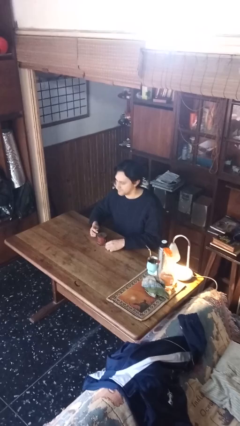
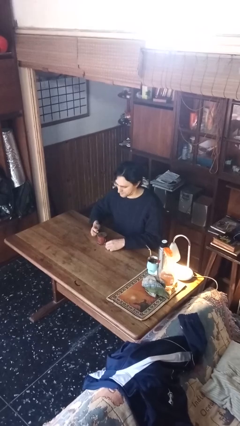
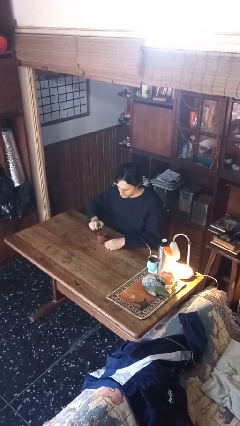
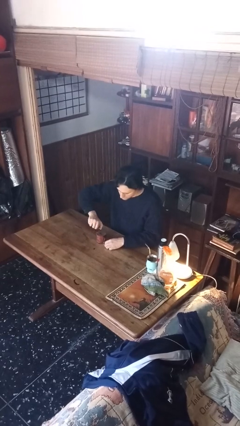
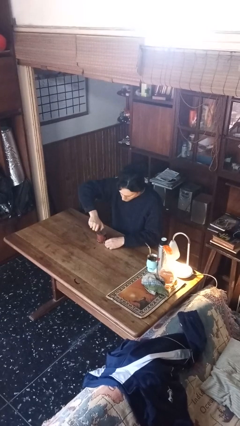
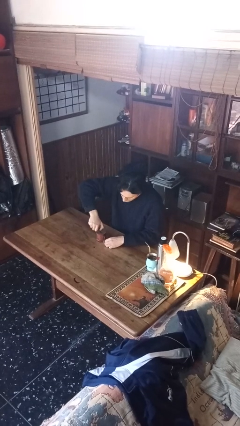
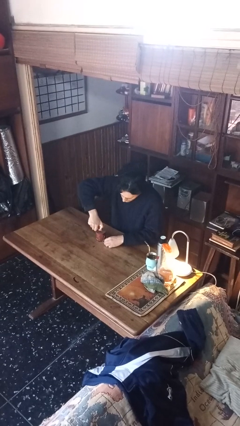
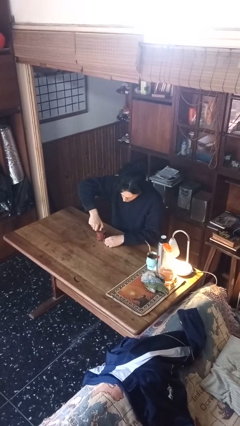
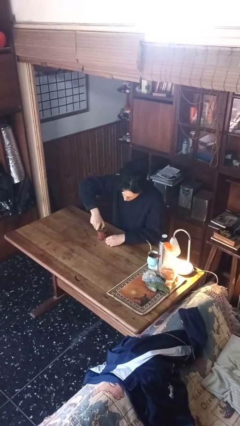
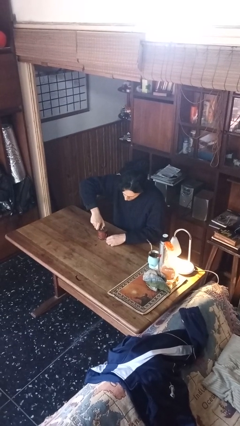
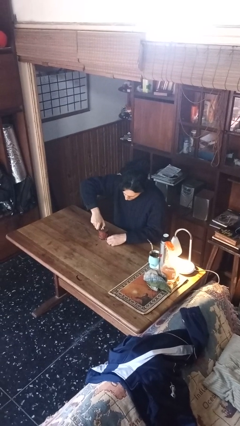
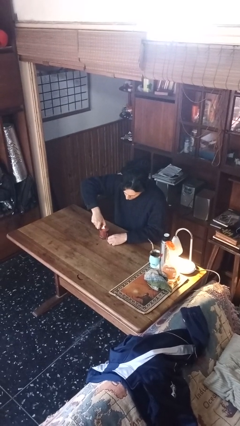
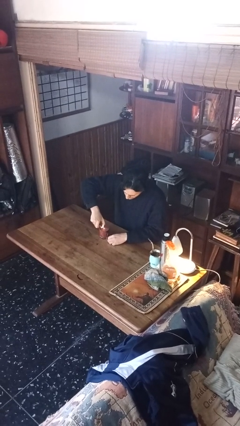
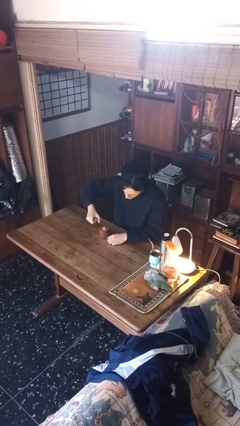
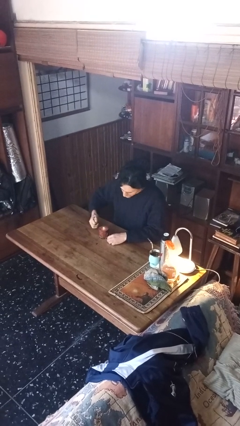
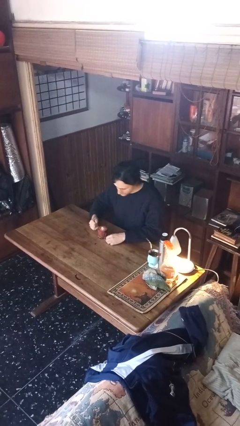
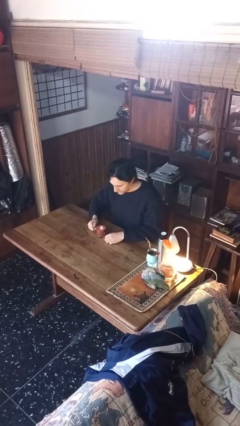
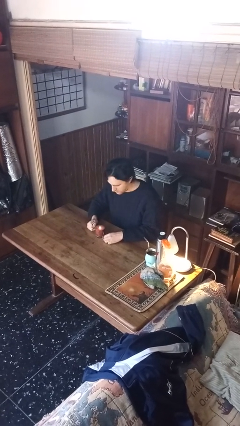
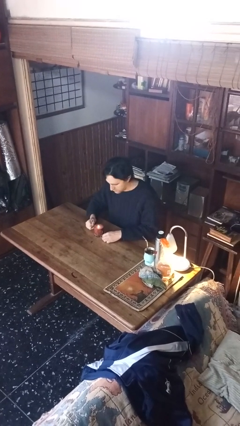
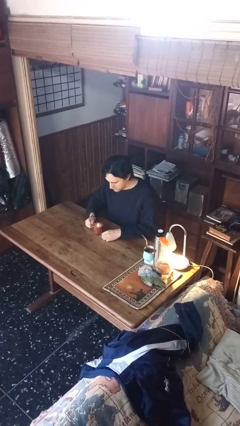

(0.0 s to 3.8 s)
person lights candle

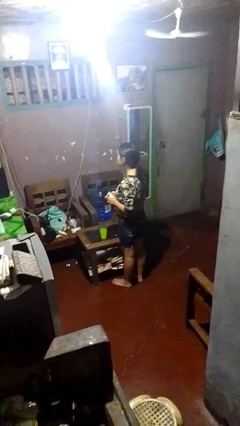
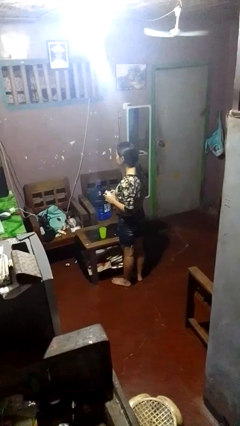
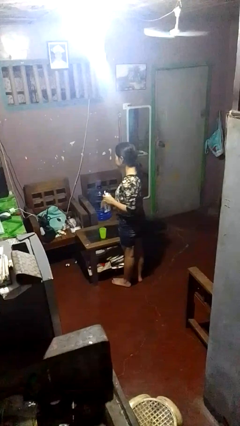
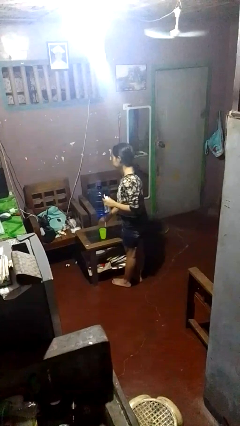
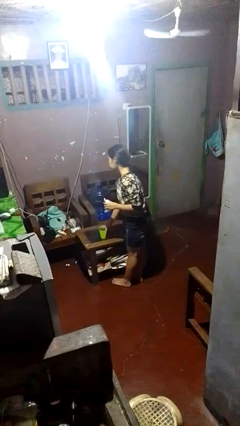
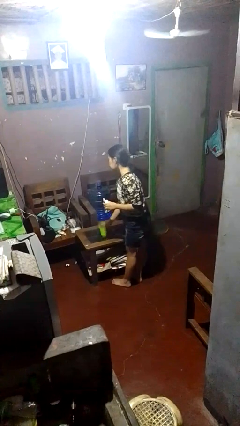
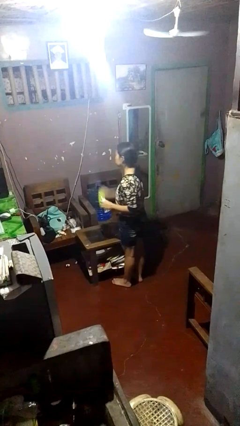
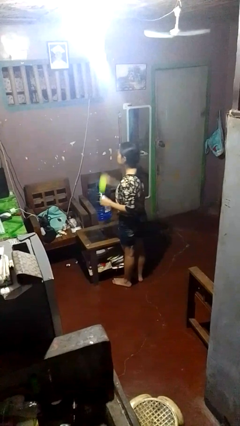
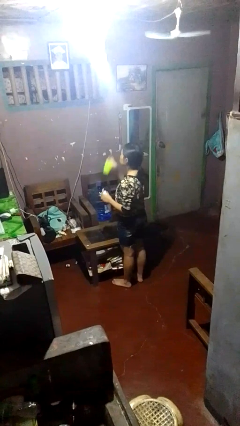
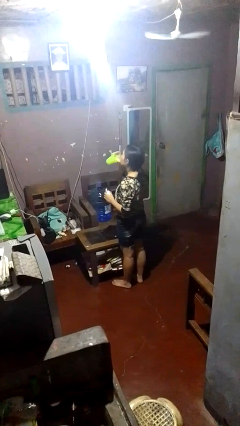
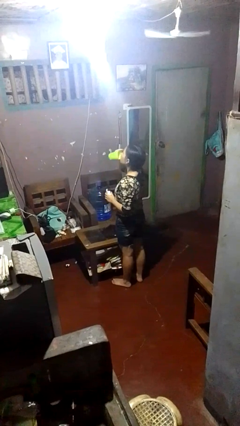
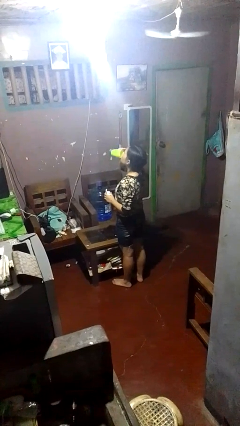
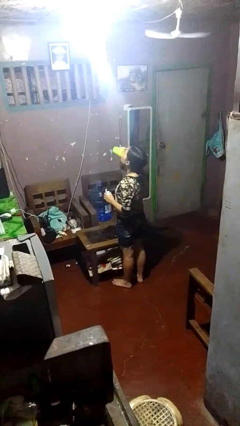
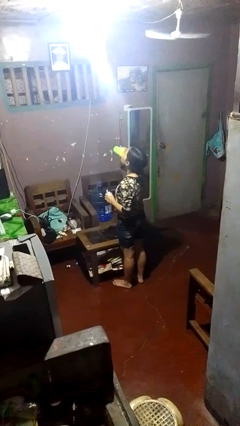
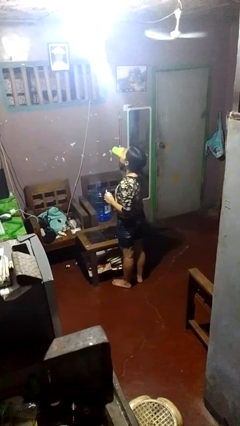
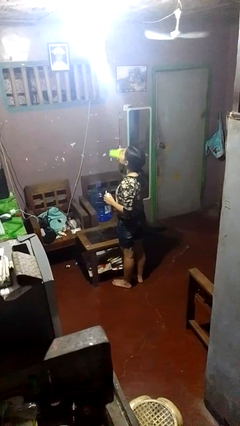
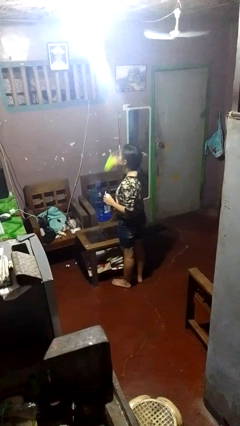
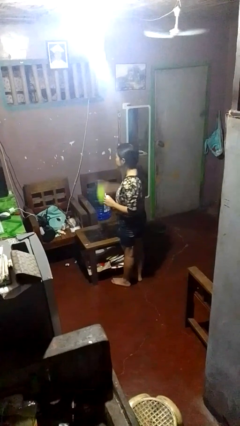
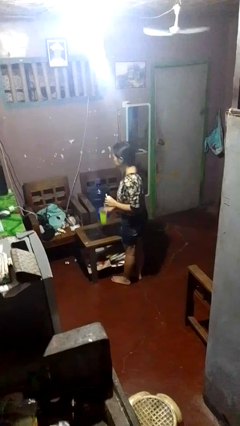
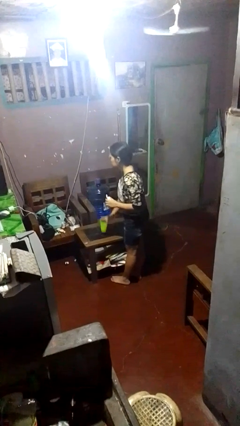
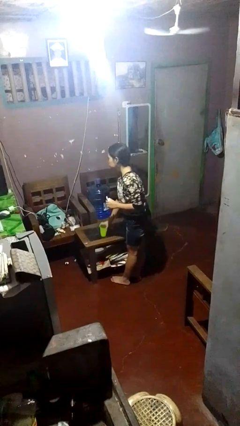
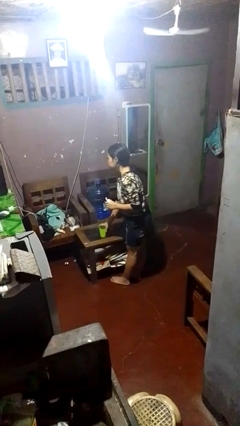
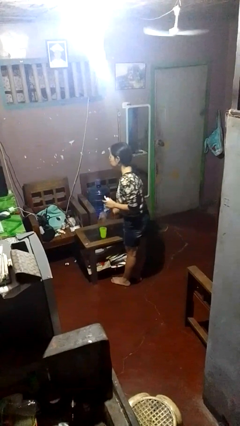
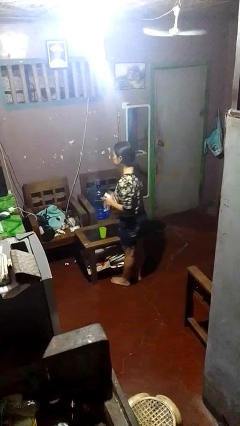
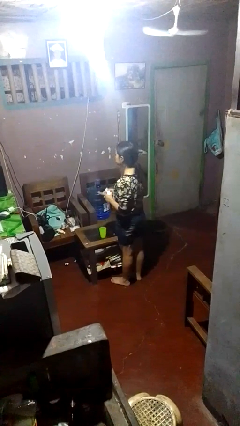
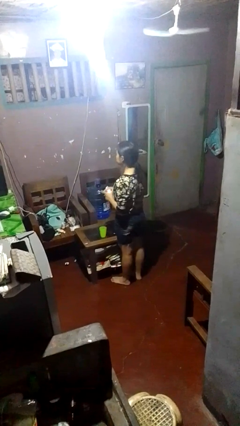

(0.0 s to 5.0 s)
person drinks from cup

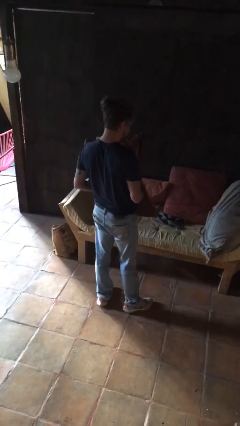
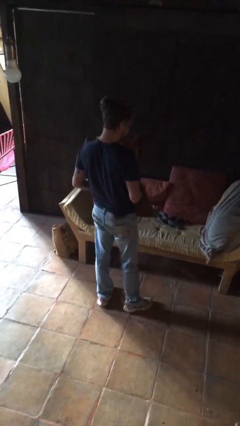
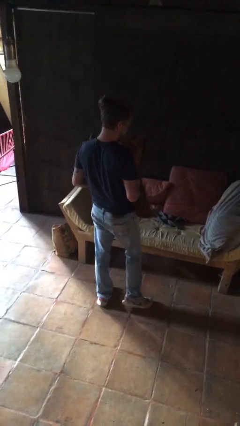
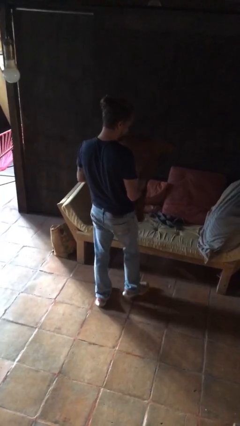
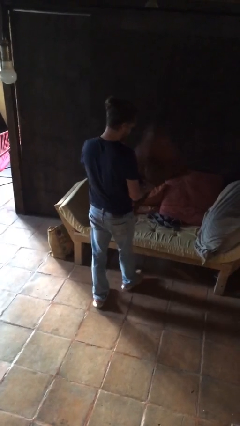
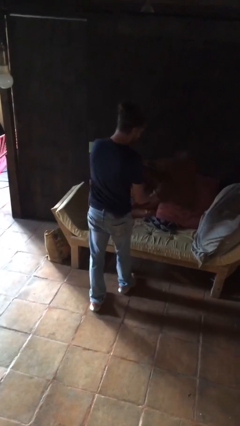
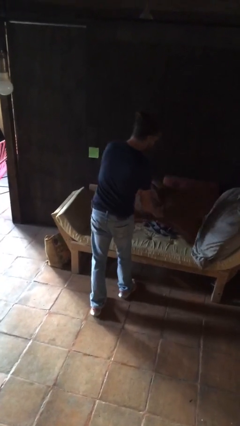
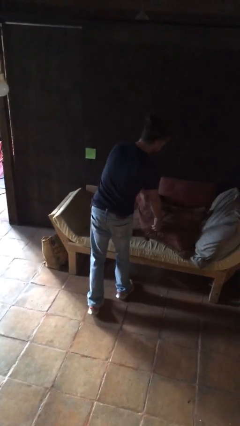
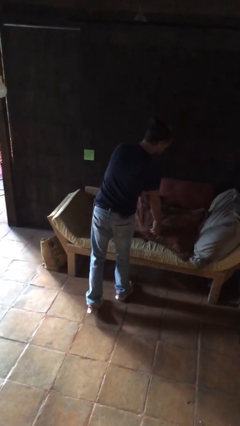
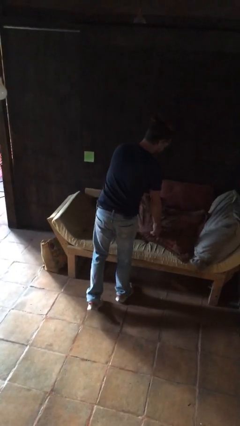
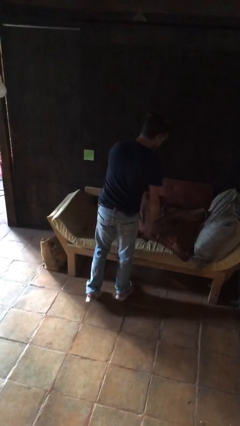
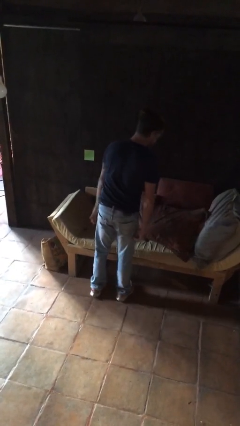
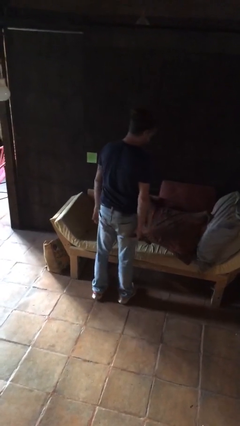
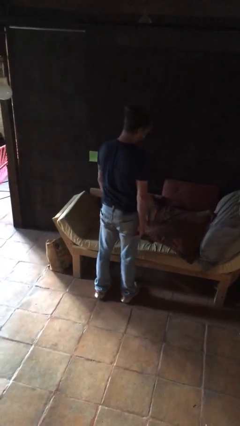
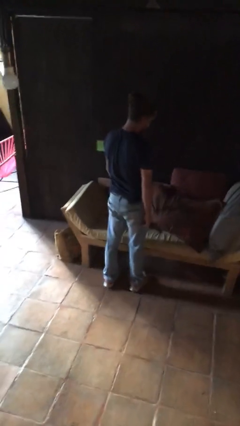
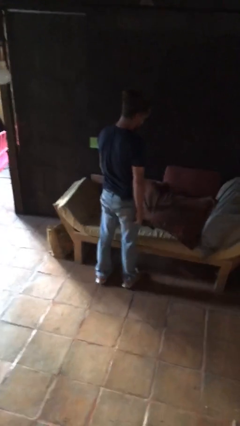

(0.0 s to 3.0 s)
person puts down object on couch

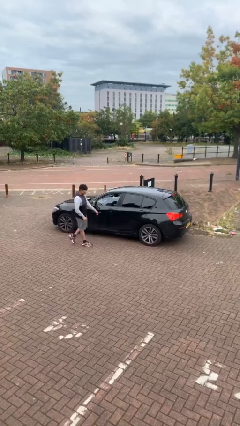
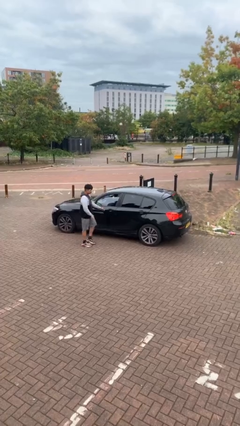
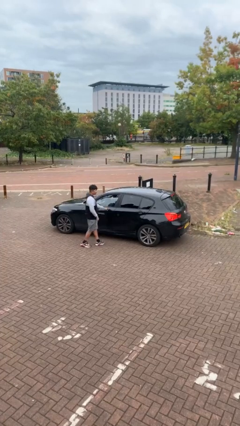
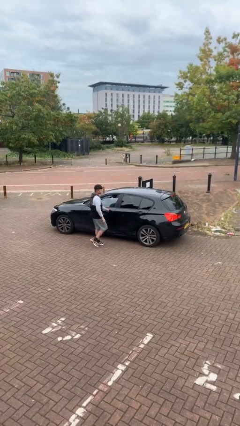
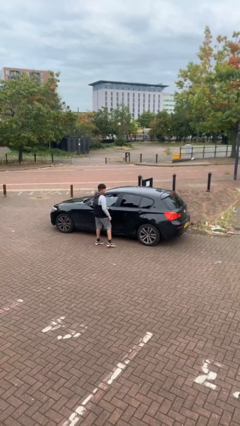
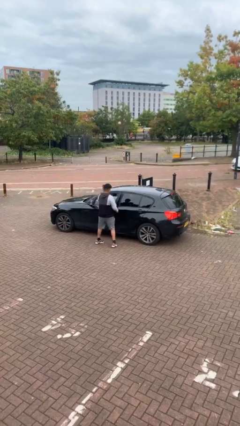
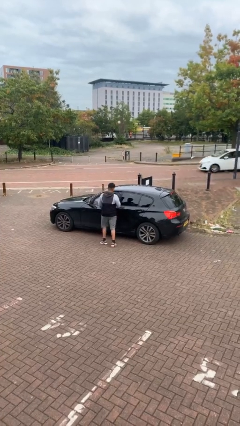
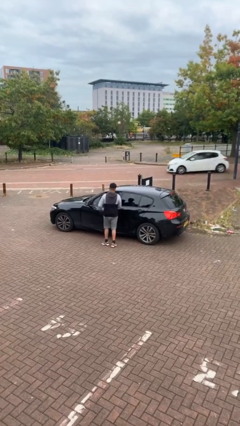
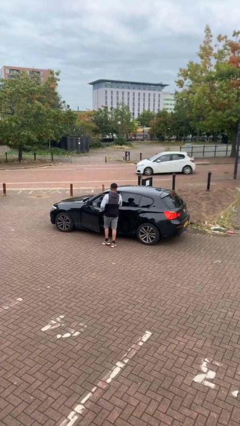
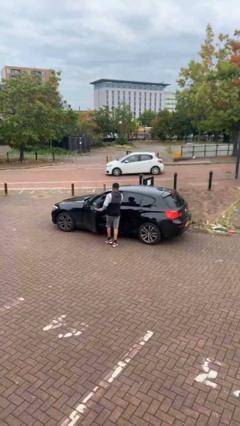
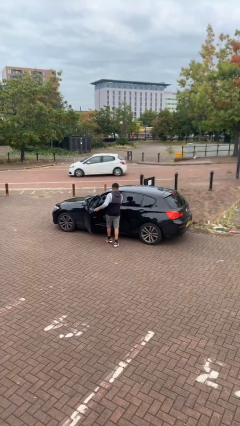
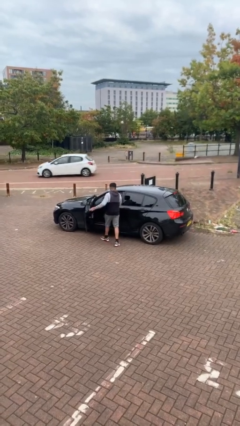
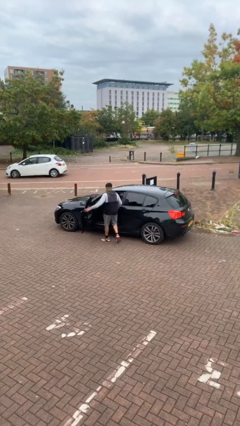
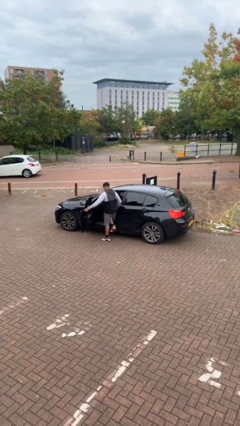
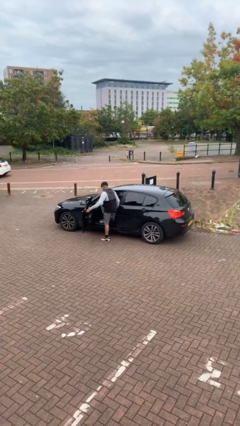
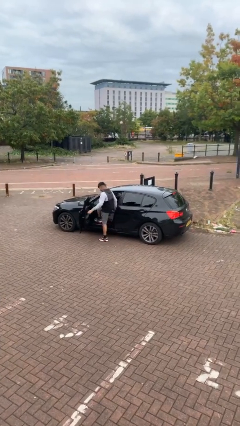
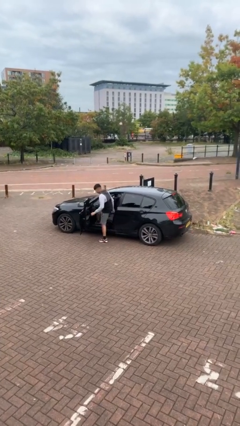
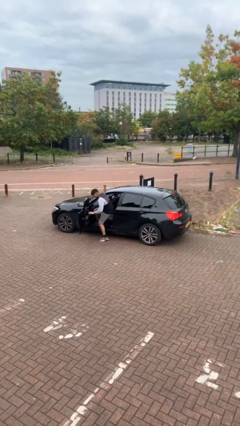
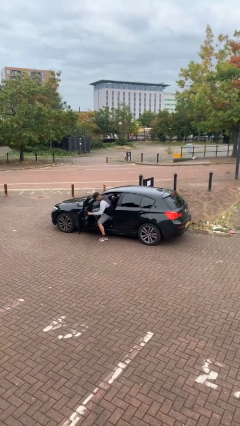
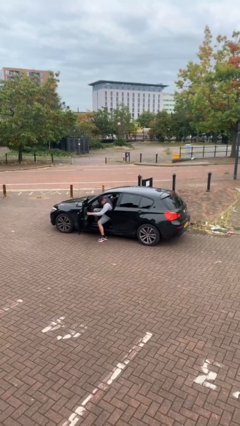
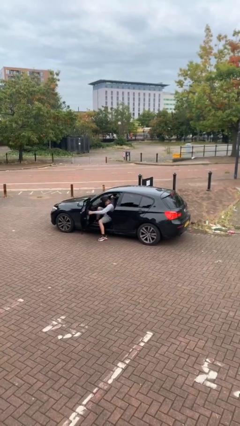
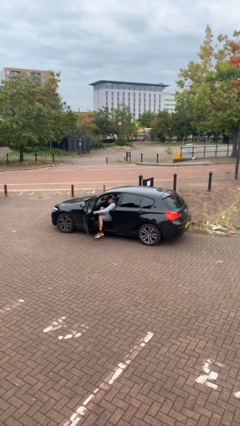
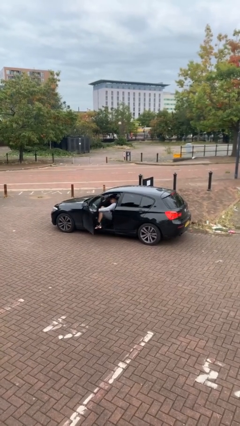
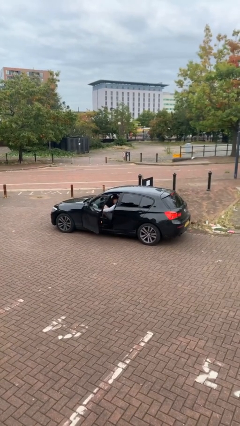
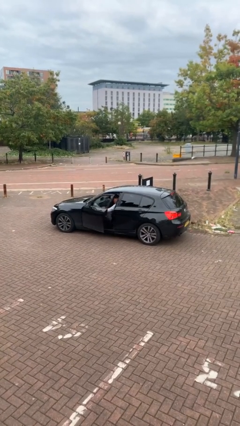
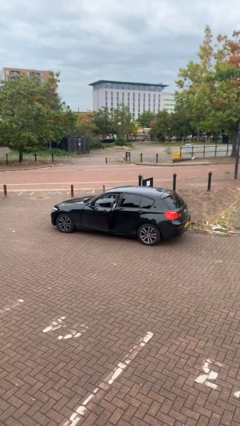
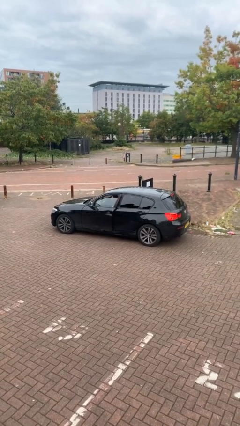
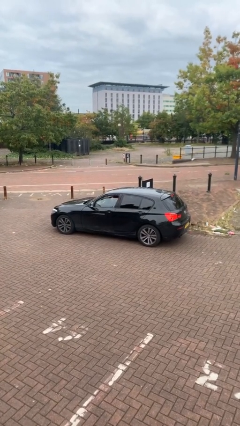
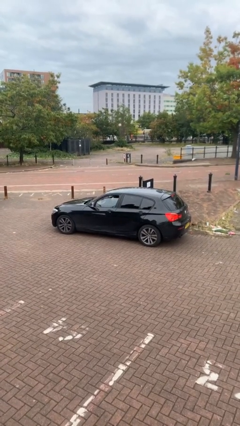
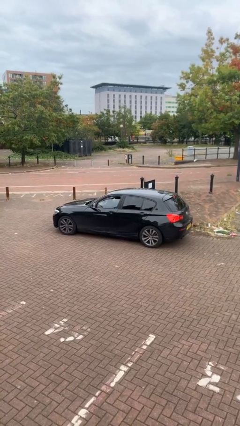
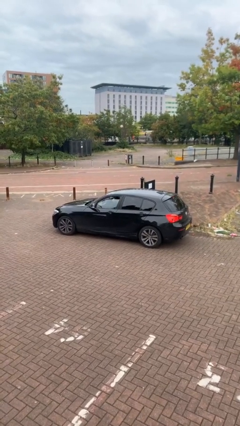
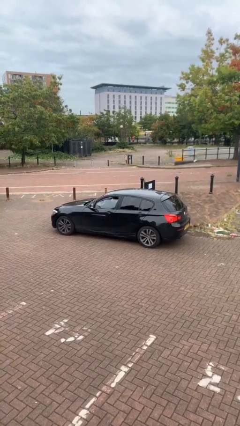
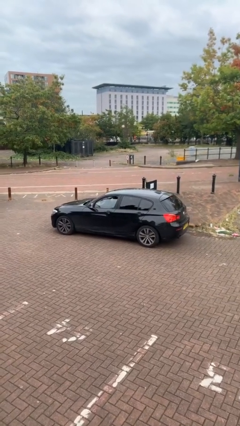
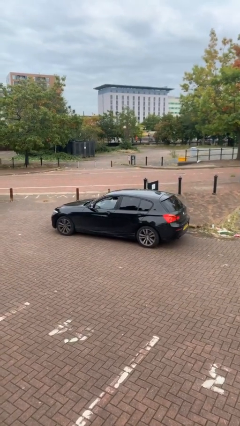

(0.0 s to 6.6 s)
car picks up person
